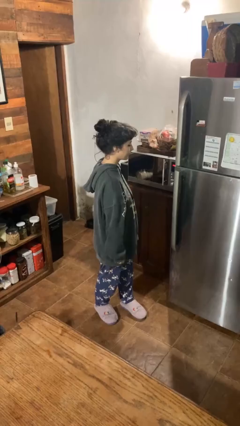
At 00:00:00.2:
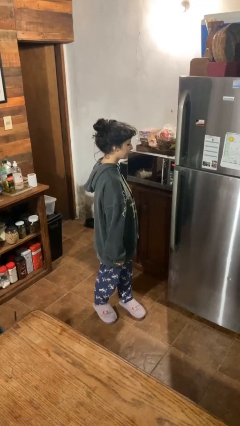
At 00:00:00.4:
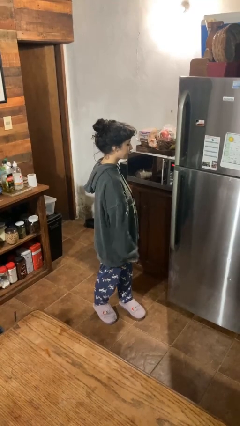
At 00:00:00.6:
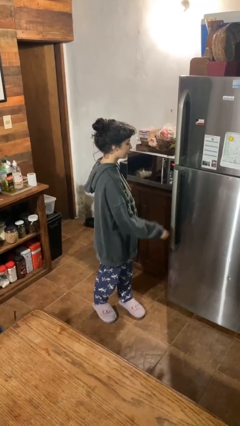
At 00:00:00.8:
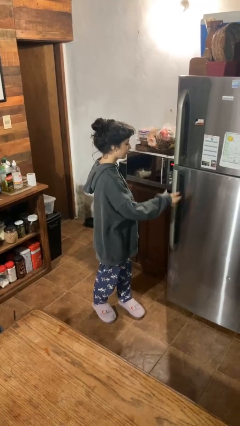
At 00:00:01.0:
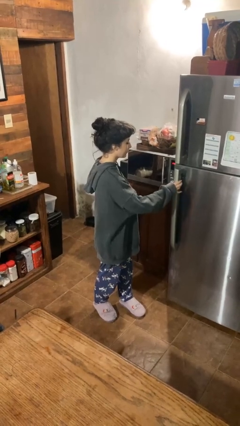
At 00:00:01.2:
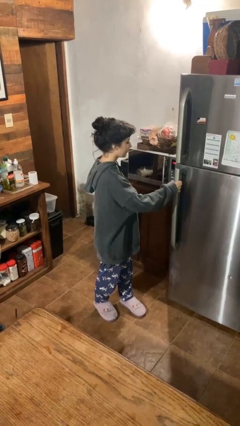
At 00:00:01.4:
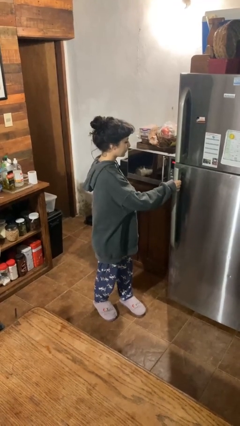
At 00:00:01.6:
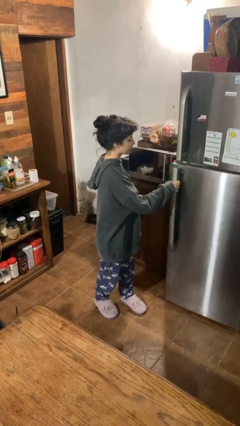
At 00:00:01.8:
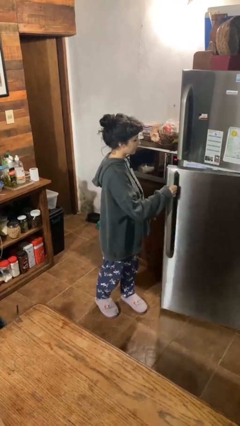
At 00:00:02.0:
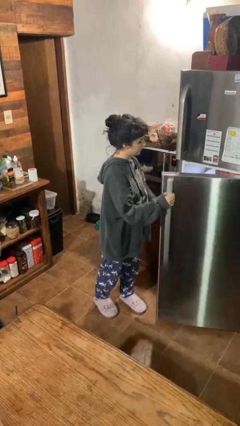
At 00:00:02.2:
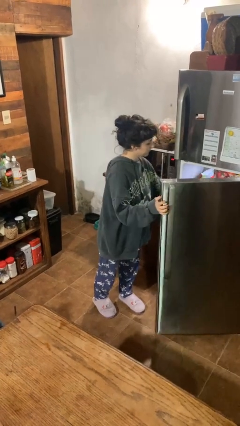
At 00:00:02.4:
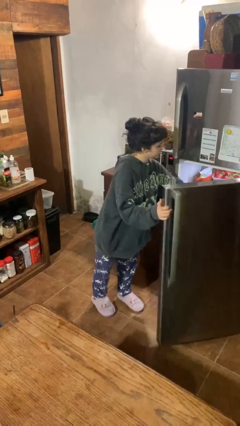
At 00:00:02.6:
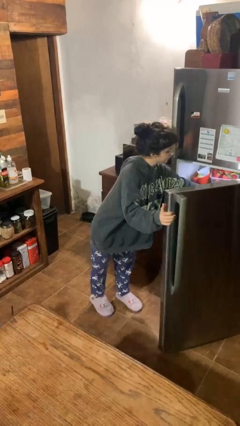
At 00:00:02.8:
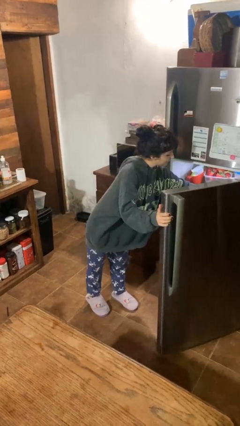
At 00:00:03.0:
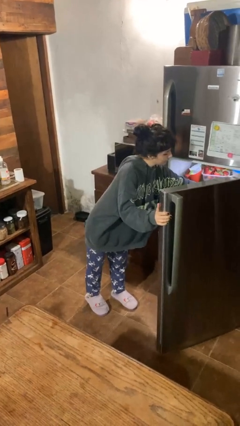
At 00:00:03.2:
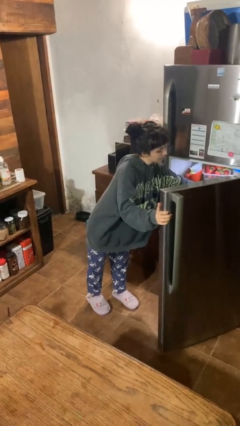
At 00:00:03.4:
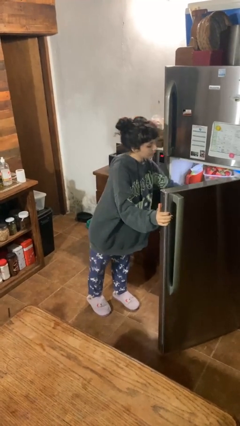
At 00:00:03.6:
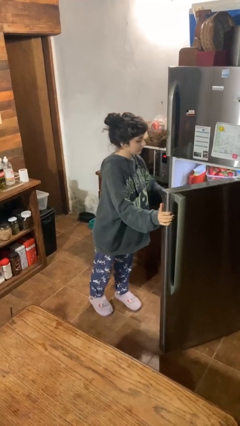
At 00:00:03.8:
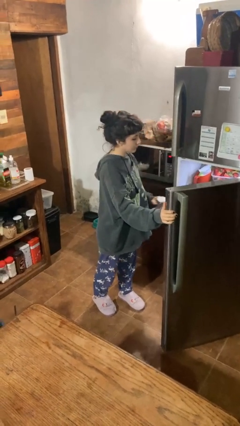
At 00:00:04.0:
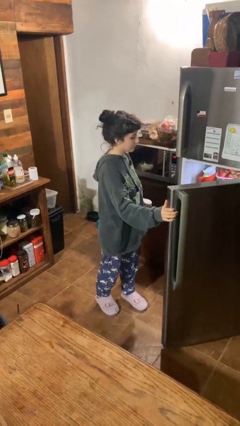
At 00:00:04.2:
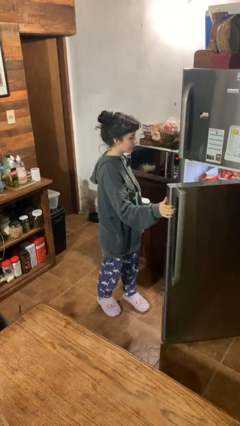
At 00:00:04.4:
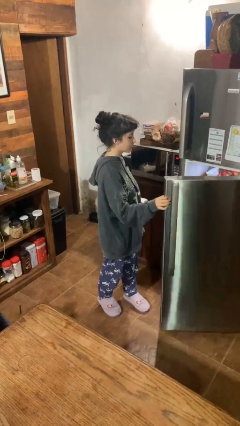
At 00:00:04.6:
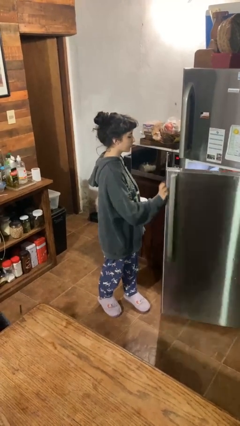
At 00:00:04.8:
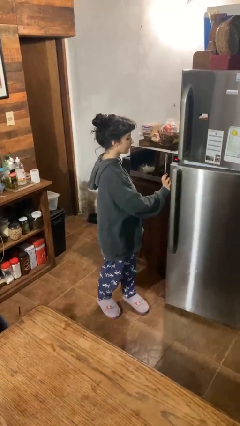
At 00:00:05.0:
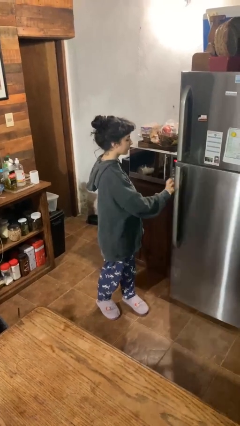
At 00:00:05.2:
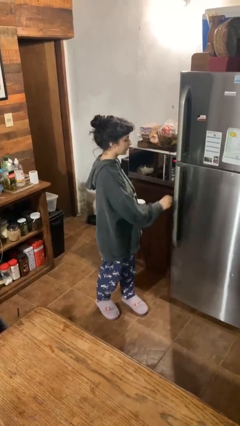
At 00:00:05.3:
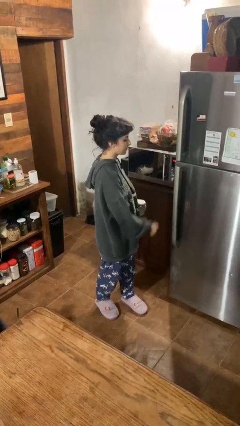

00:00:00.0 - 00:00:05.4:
person takes object from refrigerator

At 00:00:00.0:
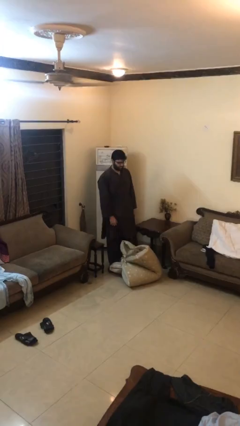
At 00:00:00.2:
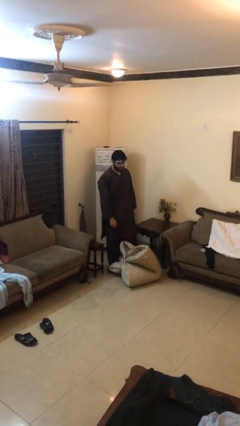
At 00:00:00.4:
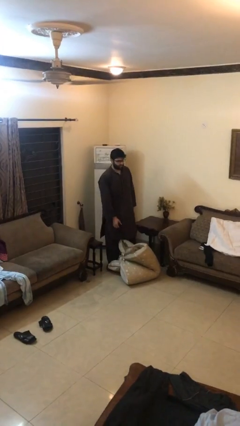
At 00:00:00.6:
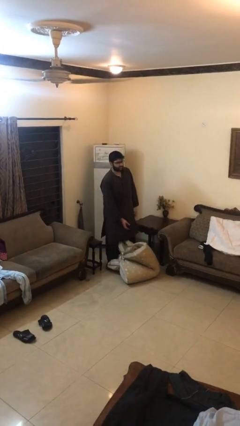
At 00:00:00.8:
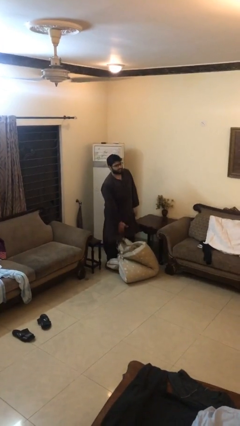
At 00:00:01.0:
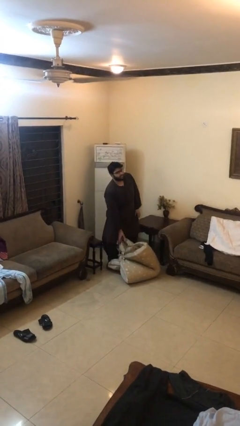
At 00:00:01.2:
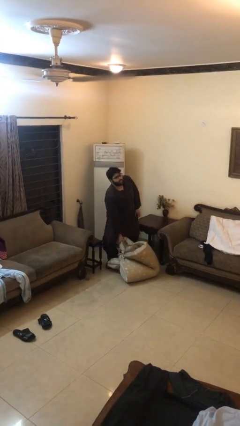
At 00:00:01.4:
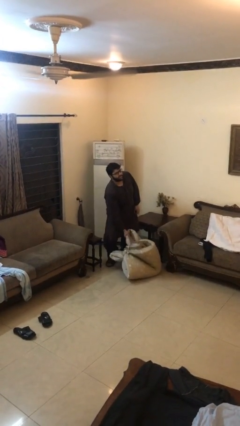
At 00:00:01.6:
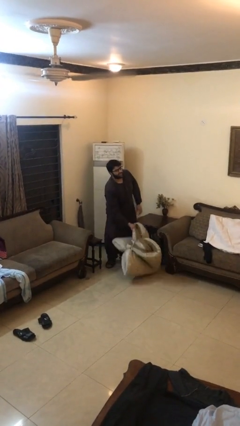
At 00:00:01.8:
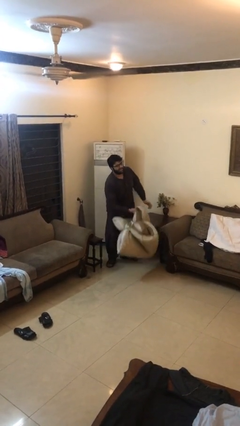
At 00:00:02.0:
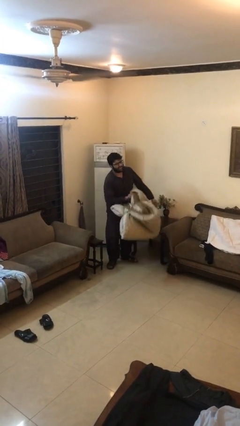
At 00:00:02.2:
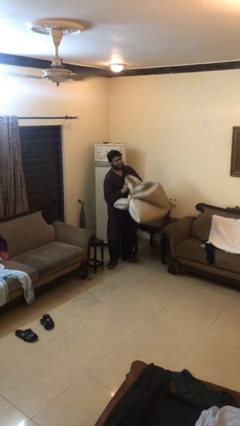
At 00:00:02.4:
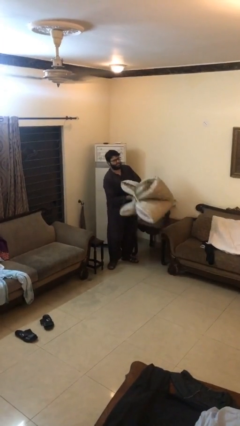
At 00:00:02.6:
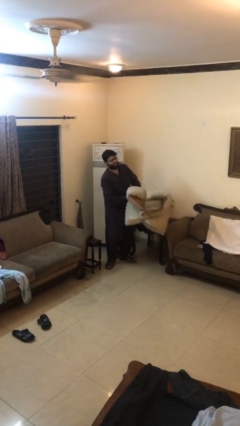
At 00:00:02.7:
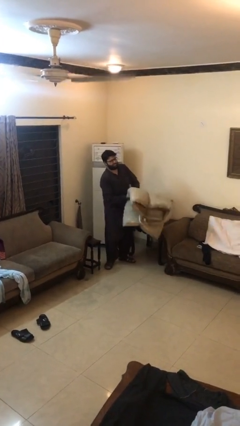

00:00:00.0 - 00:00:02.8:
person picks up object from floor

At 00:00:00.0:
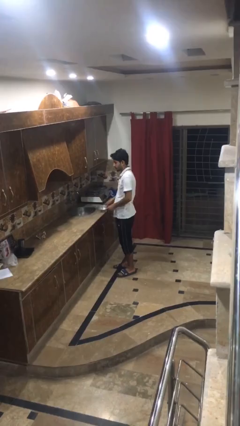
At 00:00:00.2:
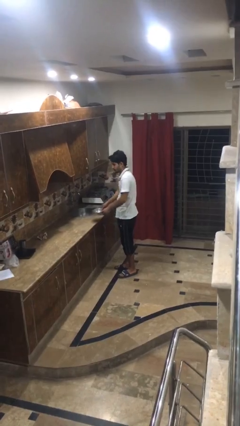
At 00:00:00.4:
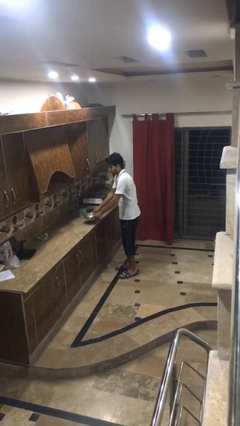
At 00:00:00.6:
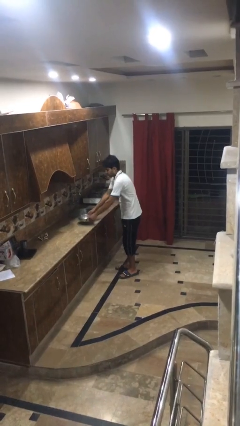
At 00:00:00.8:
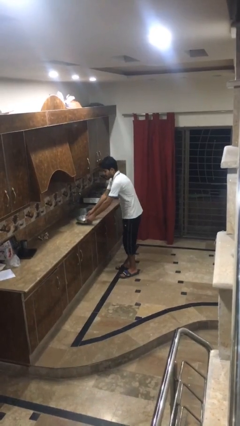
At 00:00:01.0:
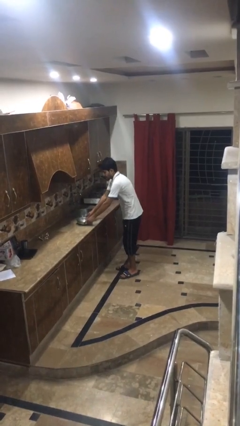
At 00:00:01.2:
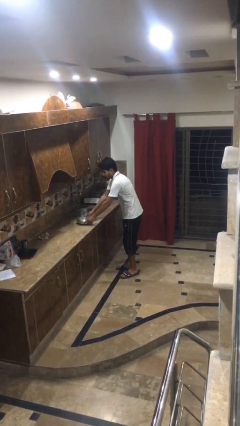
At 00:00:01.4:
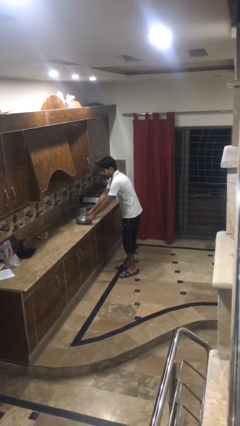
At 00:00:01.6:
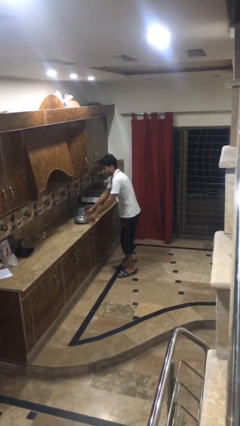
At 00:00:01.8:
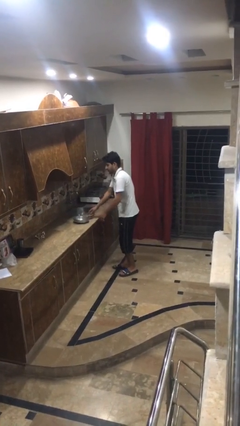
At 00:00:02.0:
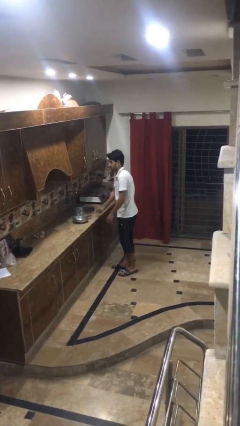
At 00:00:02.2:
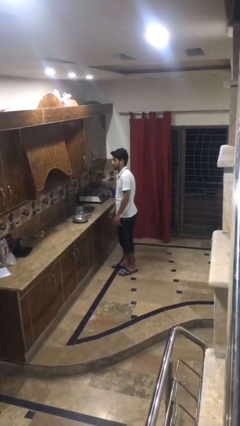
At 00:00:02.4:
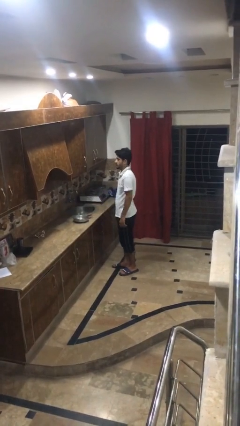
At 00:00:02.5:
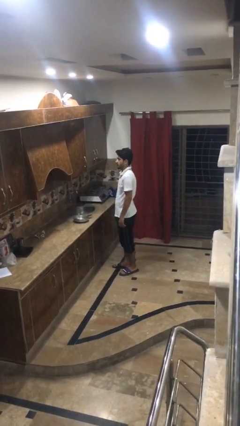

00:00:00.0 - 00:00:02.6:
person puts down object on countertop

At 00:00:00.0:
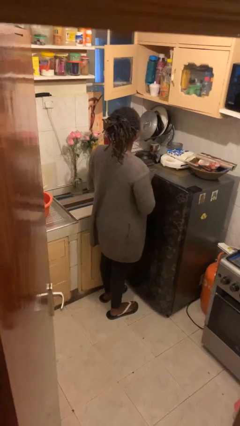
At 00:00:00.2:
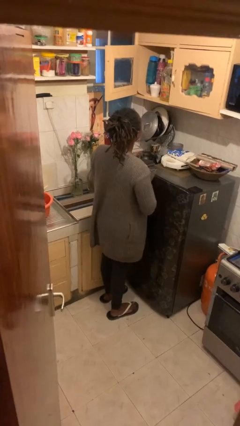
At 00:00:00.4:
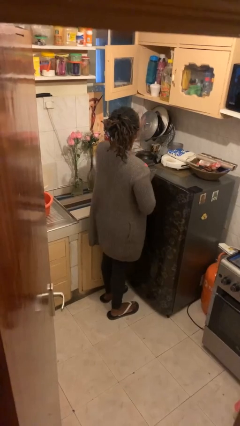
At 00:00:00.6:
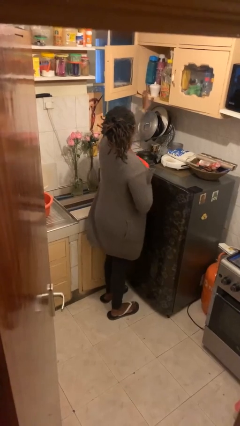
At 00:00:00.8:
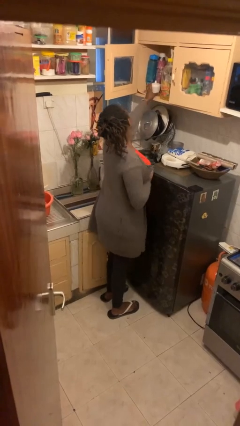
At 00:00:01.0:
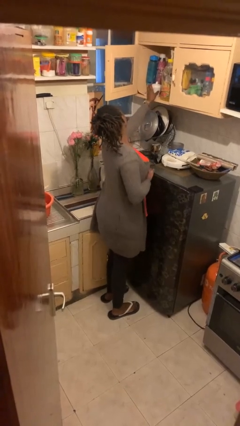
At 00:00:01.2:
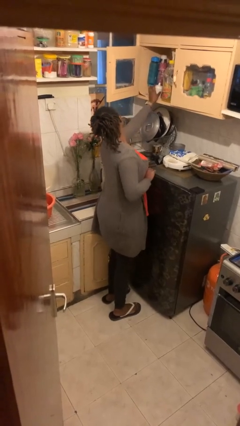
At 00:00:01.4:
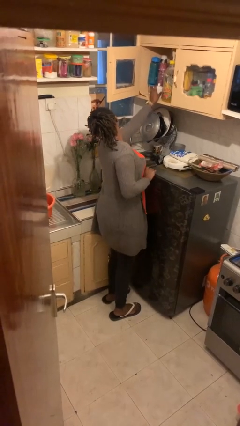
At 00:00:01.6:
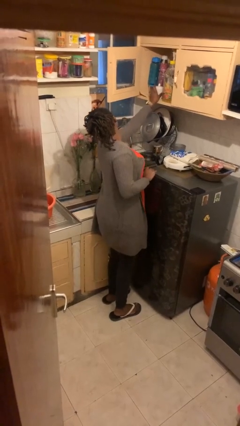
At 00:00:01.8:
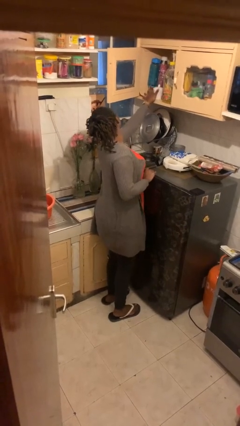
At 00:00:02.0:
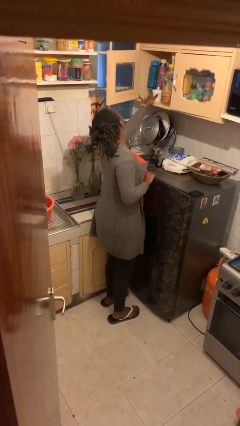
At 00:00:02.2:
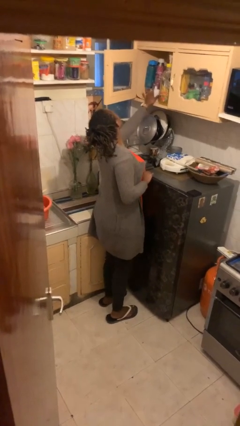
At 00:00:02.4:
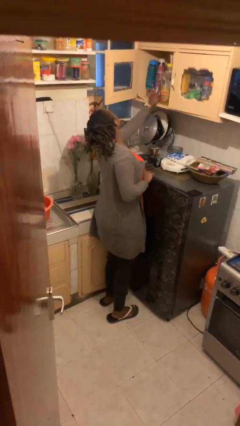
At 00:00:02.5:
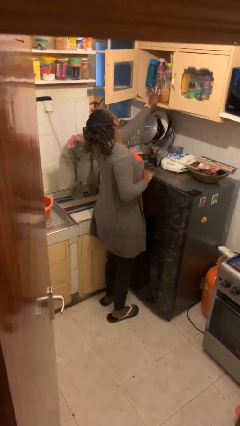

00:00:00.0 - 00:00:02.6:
person searches in cabinet

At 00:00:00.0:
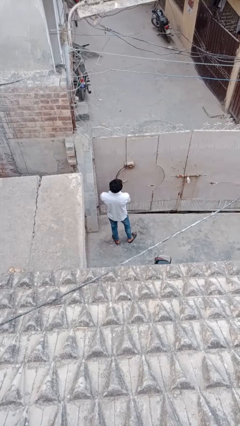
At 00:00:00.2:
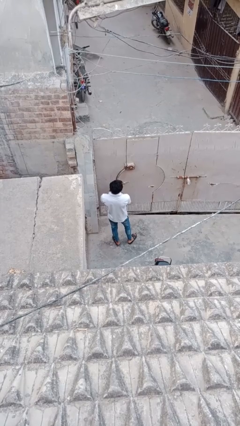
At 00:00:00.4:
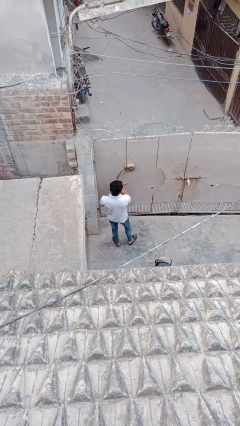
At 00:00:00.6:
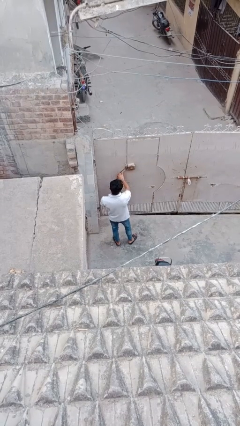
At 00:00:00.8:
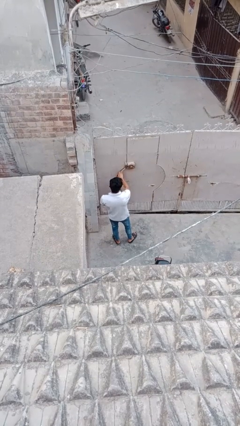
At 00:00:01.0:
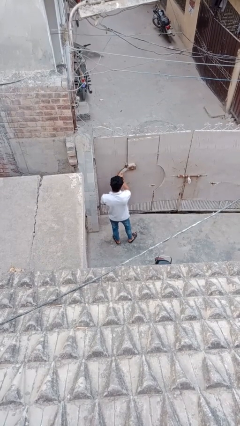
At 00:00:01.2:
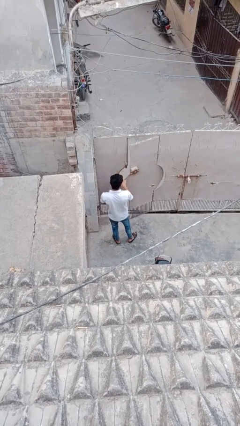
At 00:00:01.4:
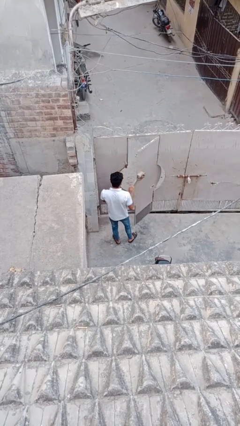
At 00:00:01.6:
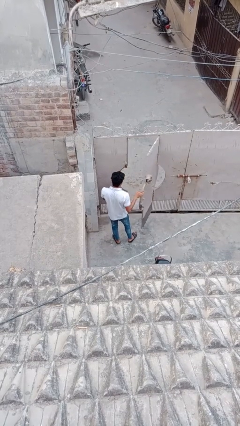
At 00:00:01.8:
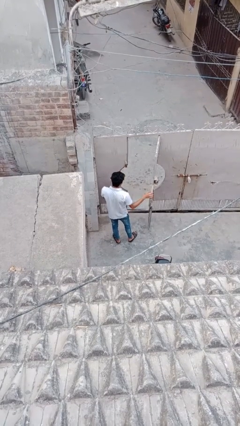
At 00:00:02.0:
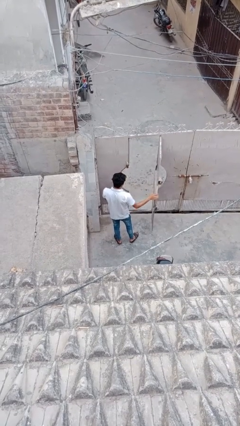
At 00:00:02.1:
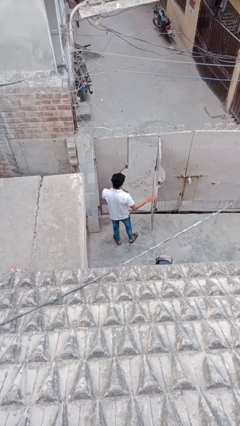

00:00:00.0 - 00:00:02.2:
person opens facility door

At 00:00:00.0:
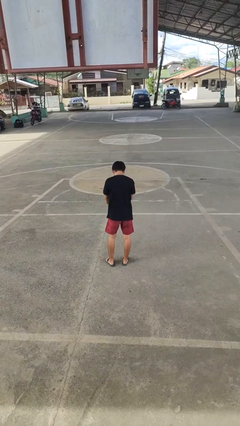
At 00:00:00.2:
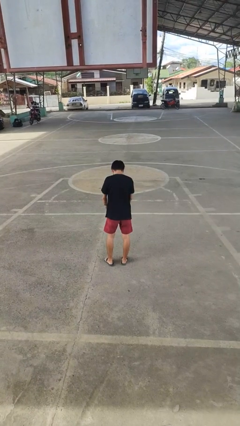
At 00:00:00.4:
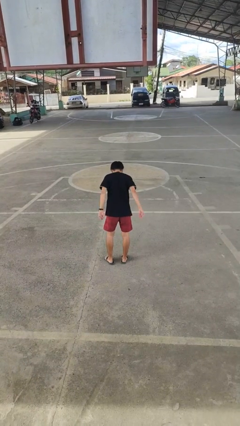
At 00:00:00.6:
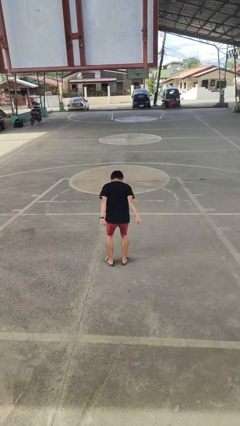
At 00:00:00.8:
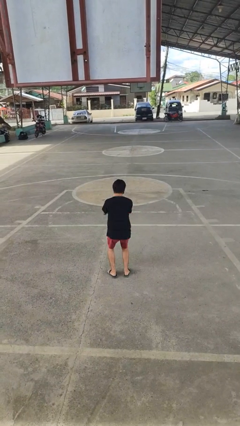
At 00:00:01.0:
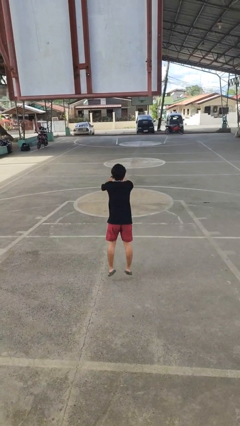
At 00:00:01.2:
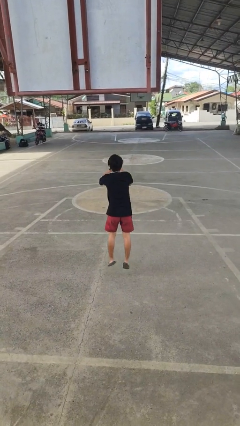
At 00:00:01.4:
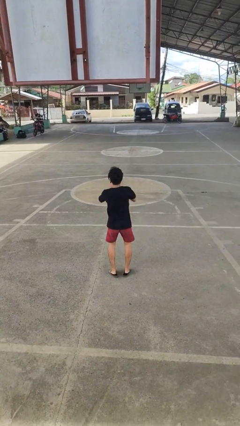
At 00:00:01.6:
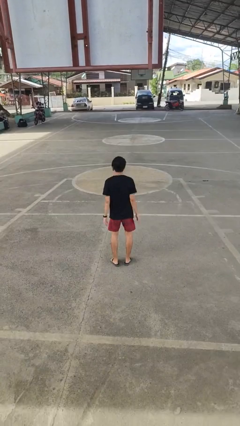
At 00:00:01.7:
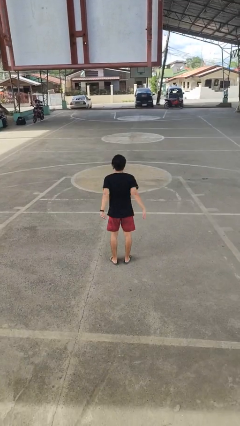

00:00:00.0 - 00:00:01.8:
person jumps
